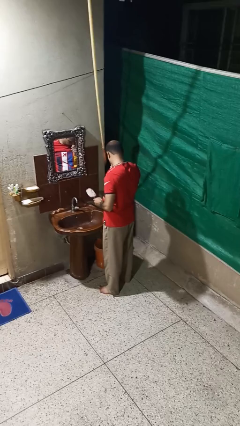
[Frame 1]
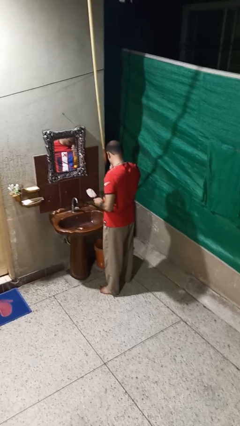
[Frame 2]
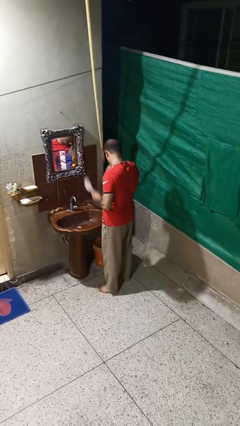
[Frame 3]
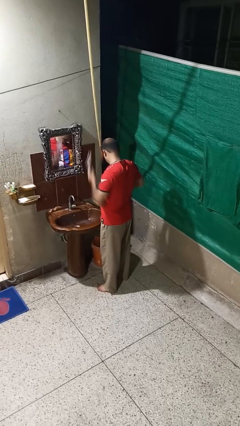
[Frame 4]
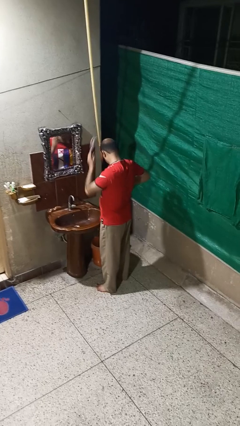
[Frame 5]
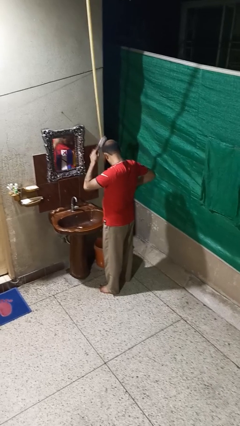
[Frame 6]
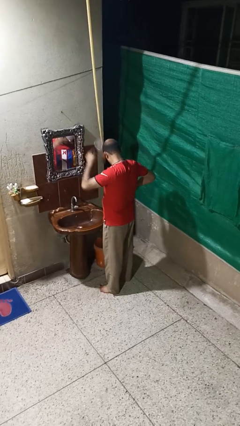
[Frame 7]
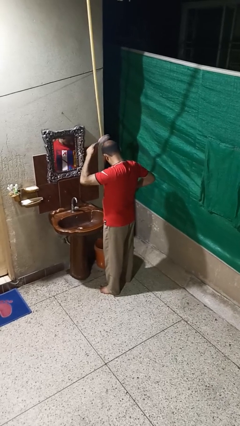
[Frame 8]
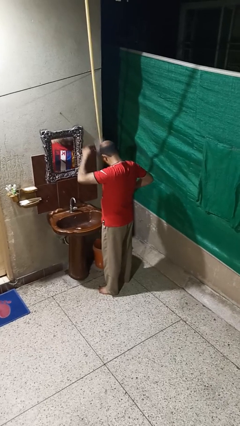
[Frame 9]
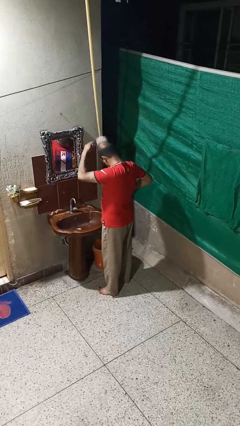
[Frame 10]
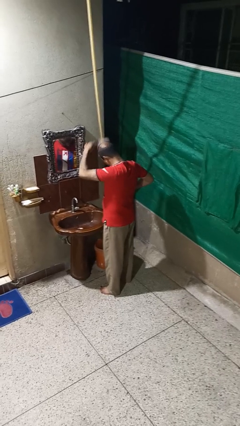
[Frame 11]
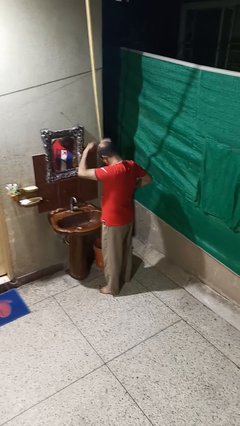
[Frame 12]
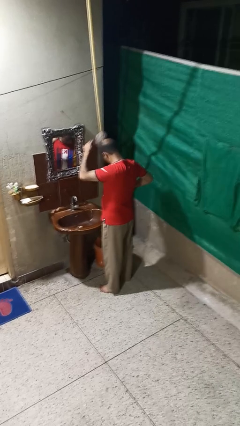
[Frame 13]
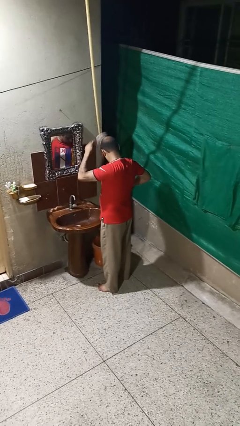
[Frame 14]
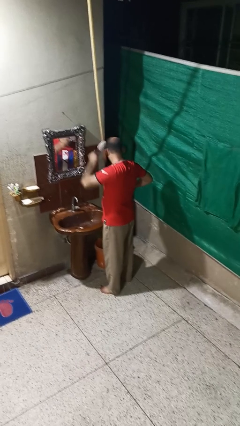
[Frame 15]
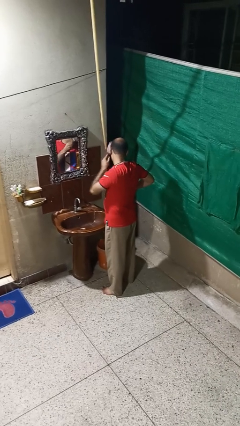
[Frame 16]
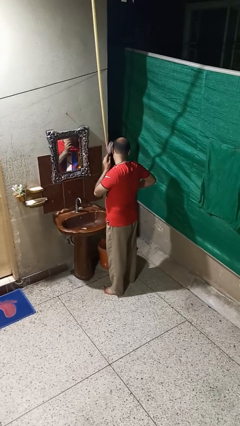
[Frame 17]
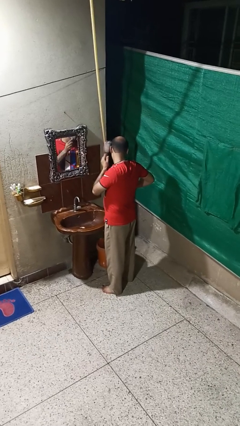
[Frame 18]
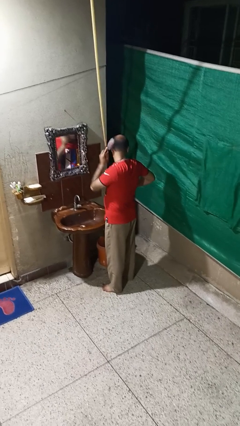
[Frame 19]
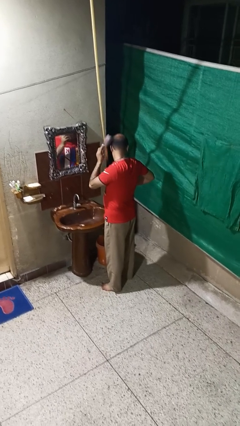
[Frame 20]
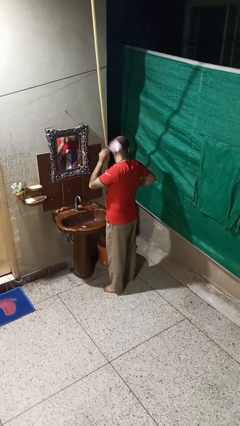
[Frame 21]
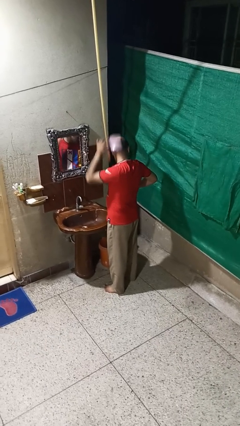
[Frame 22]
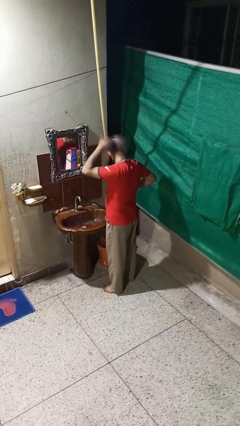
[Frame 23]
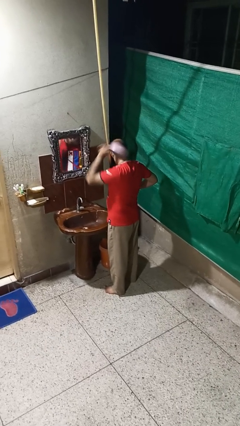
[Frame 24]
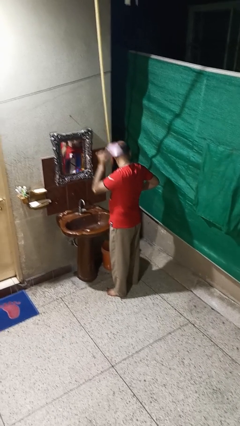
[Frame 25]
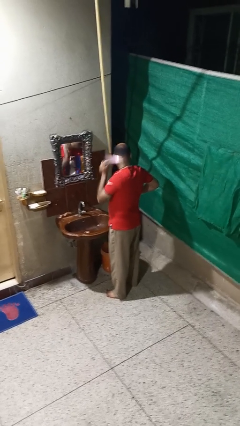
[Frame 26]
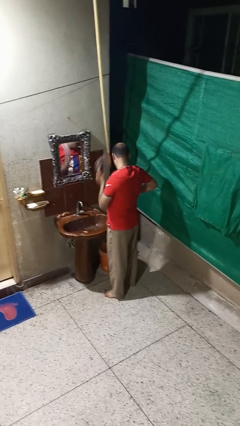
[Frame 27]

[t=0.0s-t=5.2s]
person brushes hair

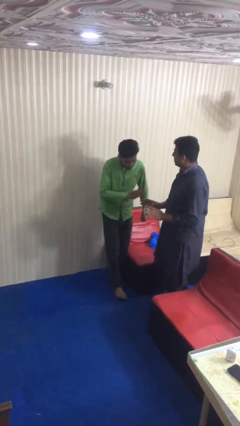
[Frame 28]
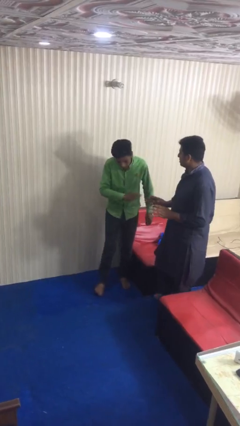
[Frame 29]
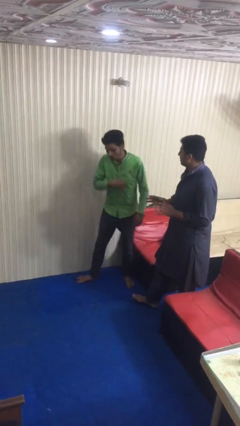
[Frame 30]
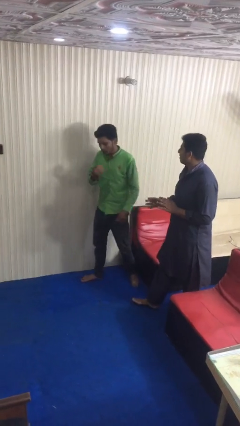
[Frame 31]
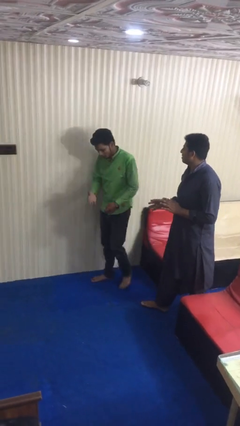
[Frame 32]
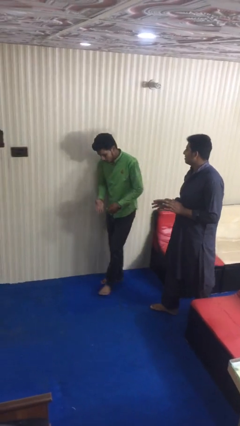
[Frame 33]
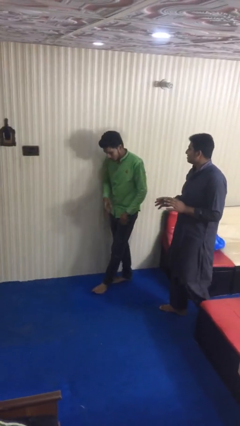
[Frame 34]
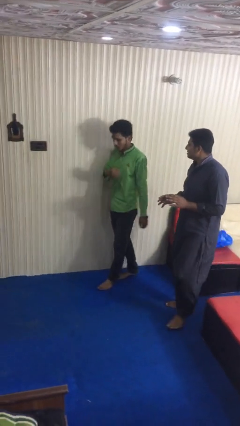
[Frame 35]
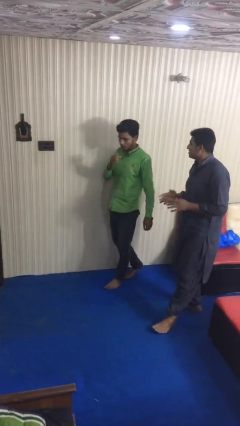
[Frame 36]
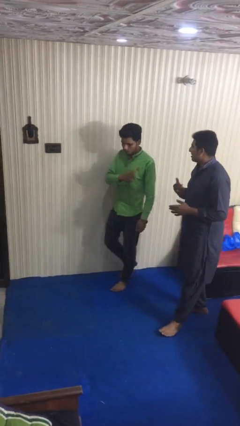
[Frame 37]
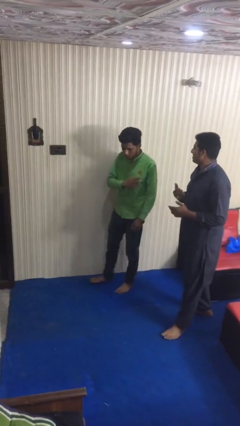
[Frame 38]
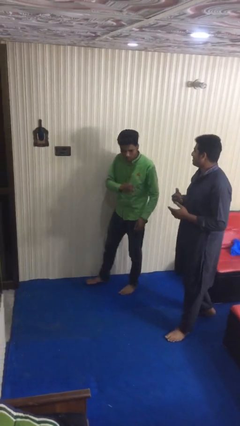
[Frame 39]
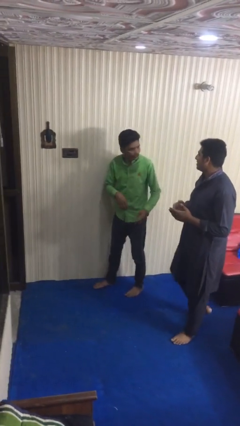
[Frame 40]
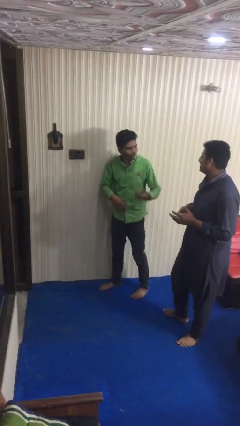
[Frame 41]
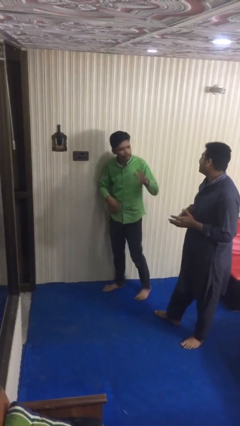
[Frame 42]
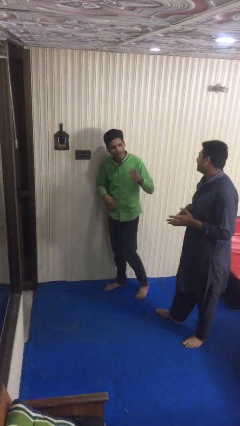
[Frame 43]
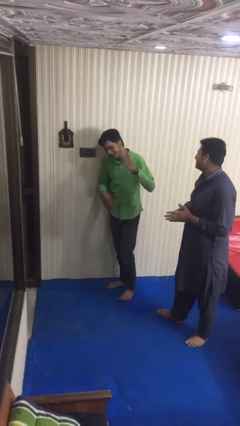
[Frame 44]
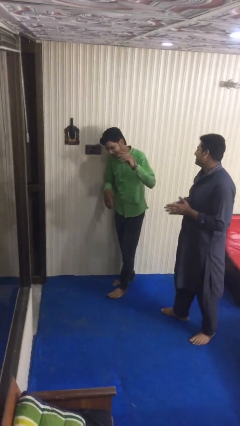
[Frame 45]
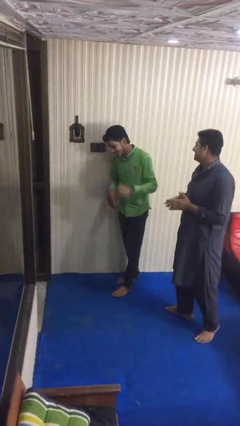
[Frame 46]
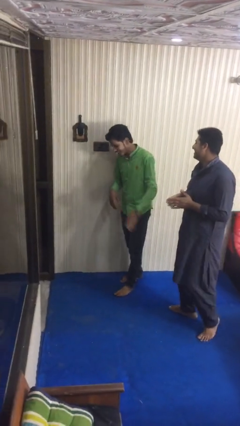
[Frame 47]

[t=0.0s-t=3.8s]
person talks to person

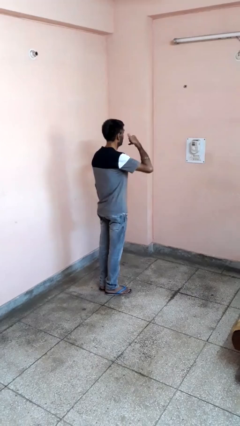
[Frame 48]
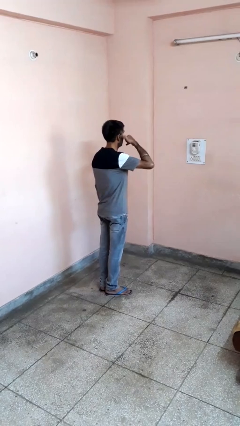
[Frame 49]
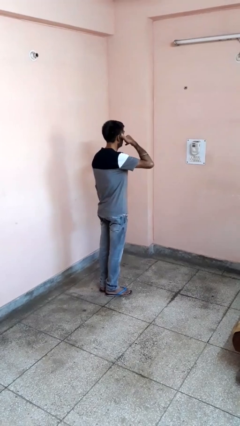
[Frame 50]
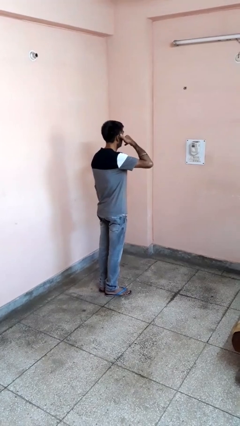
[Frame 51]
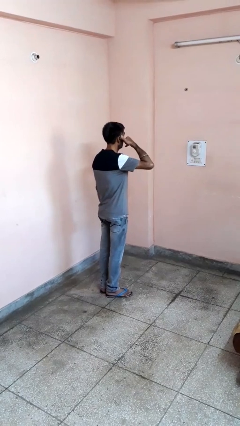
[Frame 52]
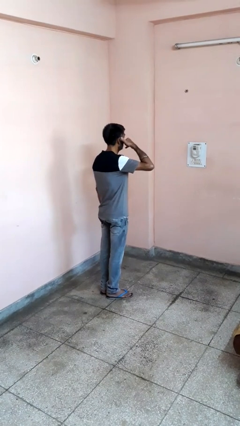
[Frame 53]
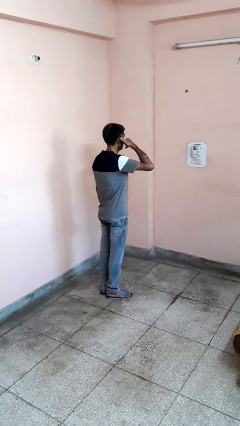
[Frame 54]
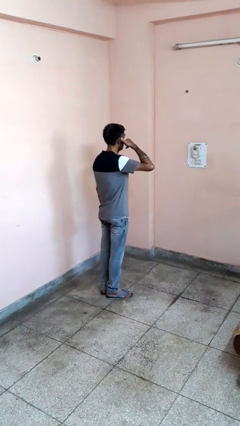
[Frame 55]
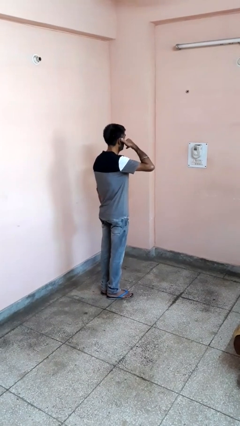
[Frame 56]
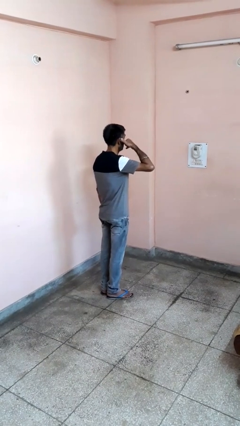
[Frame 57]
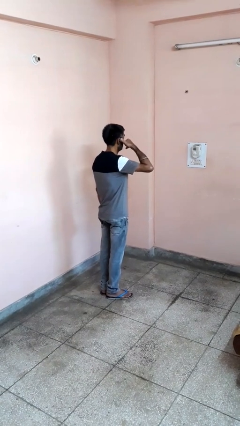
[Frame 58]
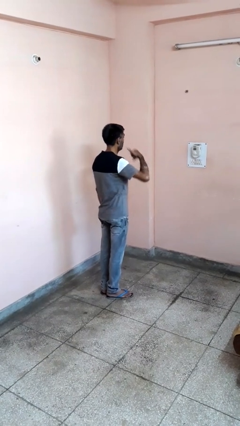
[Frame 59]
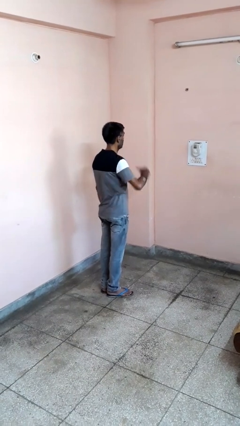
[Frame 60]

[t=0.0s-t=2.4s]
person gestures call me

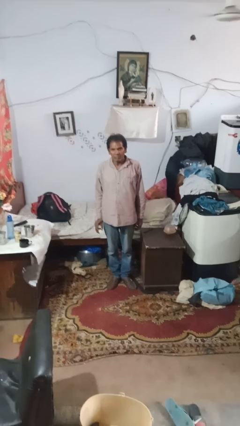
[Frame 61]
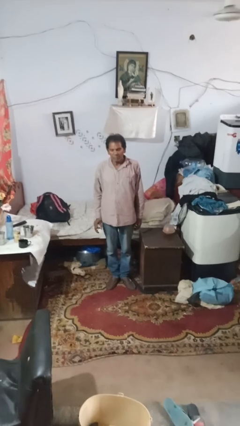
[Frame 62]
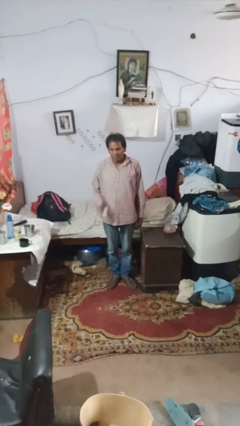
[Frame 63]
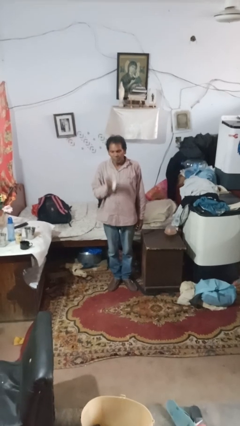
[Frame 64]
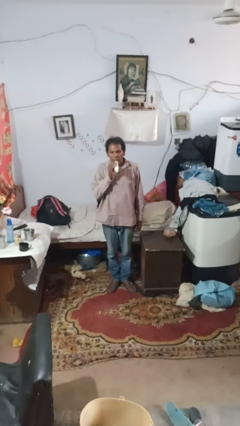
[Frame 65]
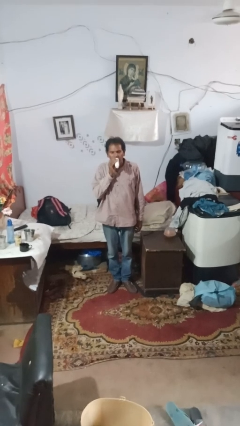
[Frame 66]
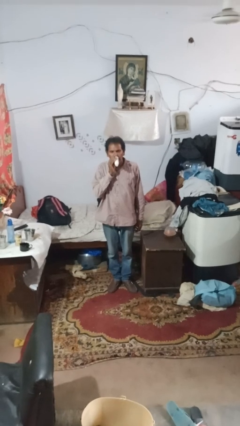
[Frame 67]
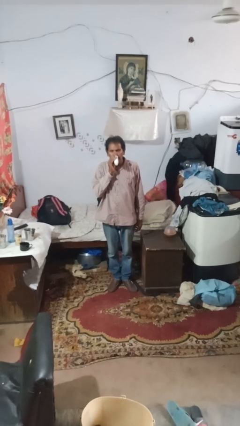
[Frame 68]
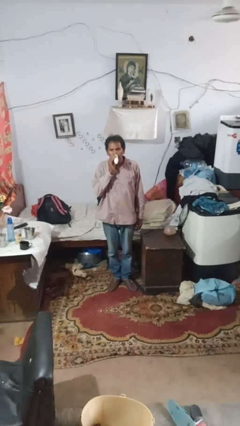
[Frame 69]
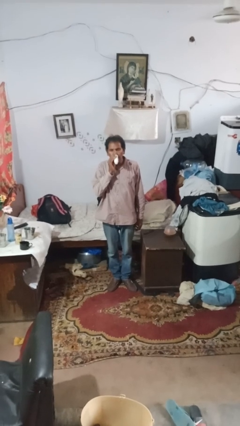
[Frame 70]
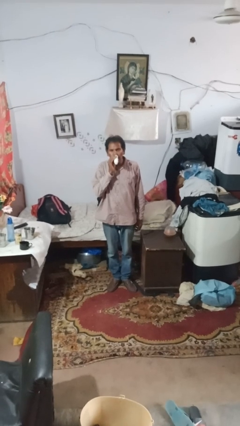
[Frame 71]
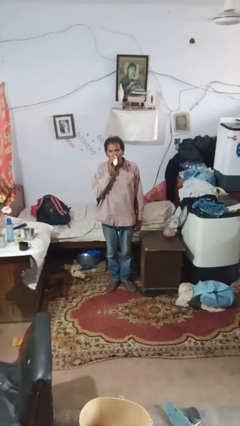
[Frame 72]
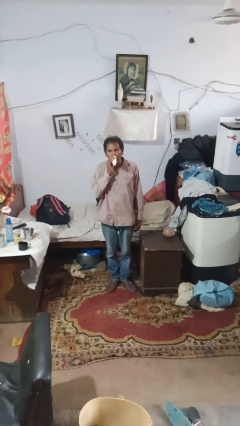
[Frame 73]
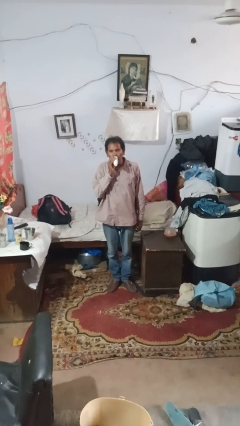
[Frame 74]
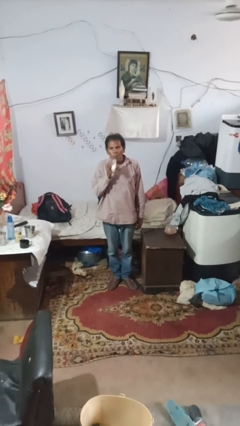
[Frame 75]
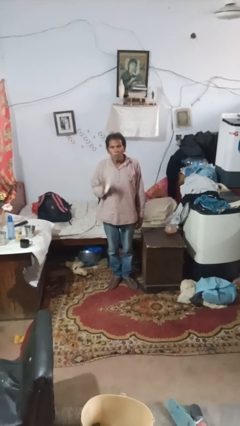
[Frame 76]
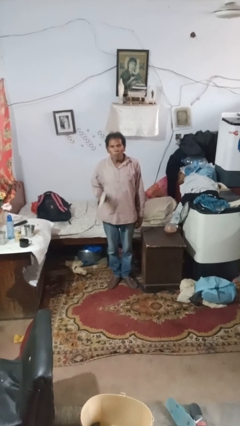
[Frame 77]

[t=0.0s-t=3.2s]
person vapes

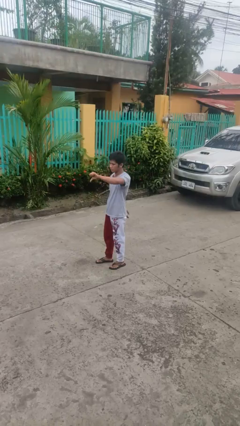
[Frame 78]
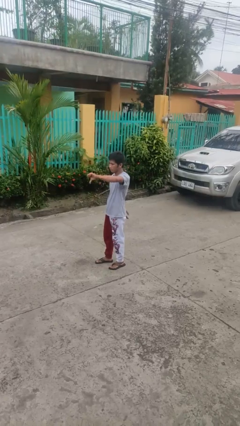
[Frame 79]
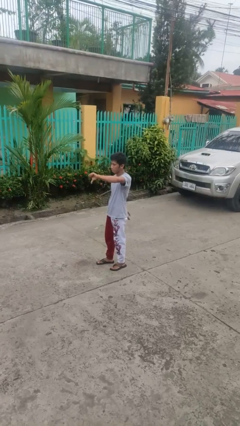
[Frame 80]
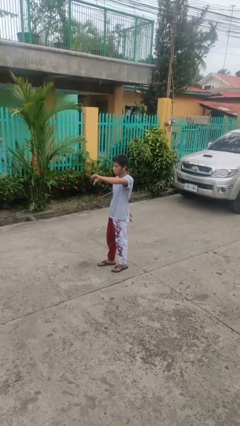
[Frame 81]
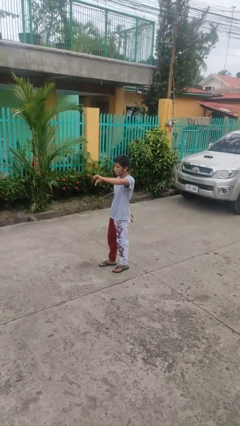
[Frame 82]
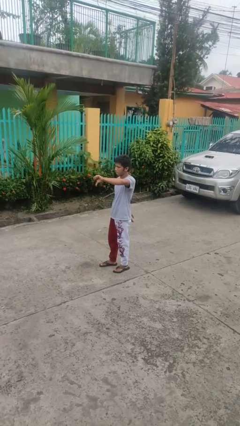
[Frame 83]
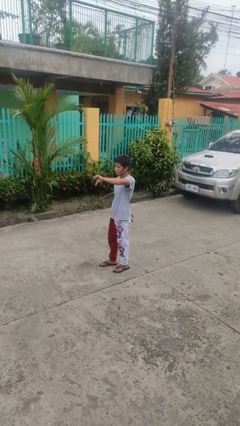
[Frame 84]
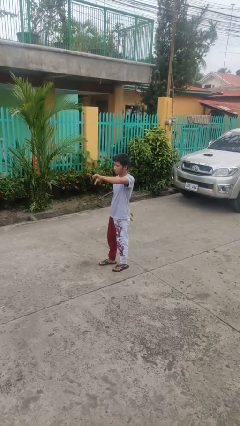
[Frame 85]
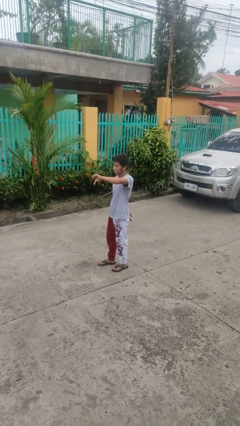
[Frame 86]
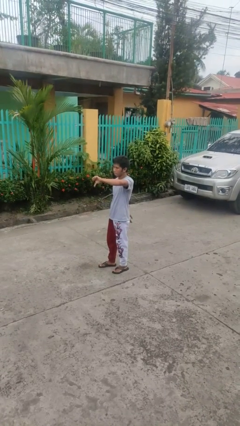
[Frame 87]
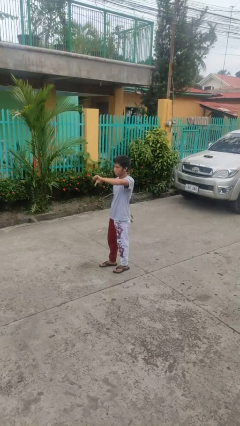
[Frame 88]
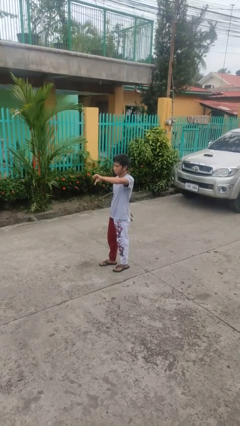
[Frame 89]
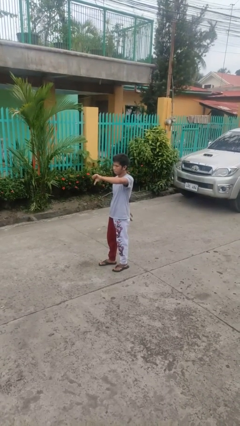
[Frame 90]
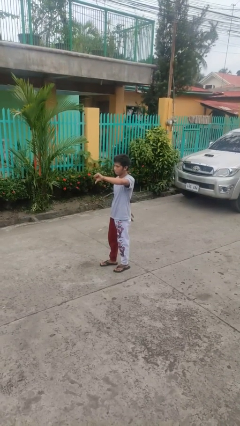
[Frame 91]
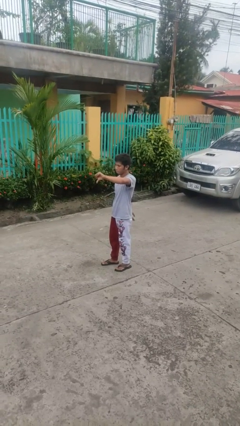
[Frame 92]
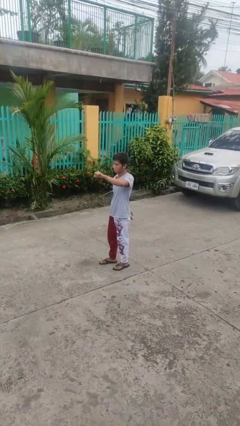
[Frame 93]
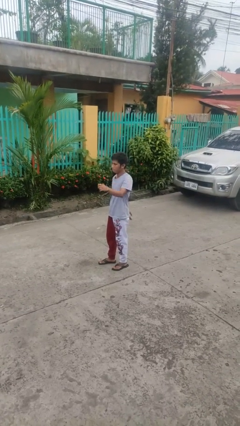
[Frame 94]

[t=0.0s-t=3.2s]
person gestures thumbs down
